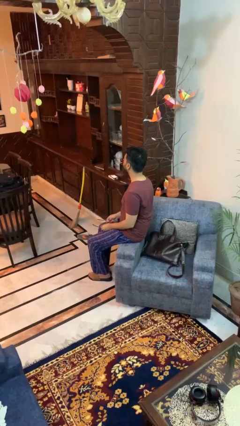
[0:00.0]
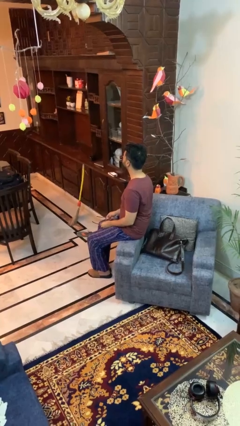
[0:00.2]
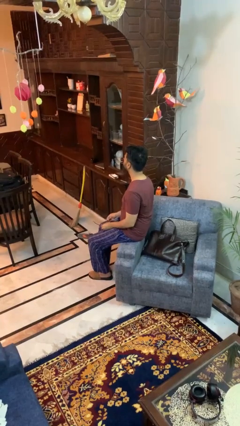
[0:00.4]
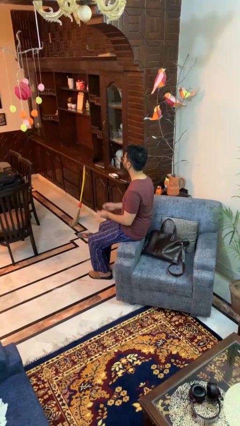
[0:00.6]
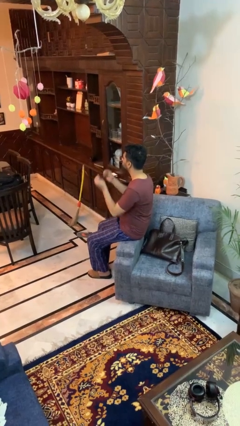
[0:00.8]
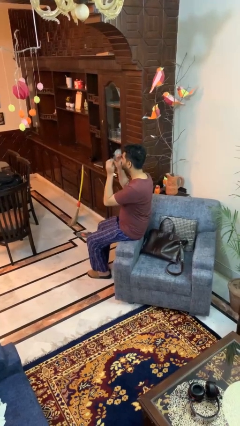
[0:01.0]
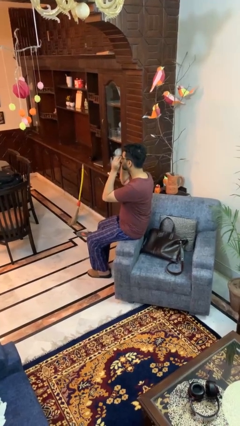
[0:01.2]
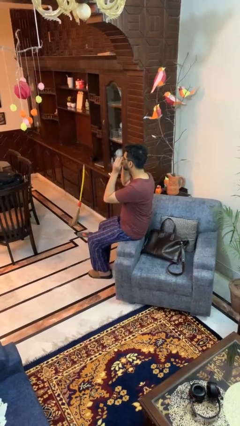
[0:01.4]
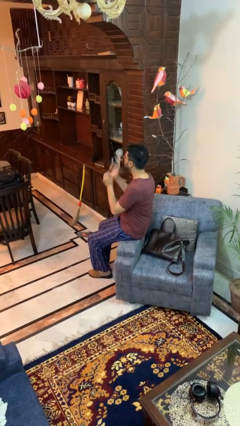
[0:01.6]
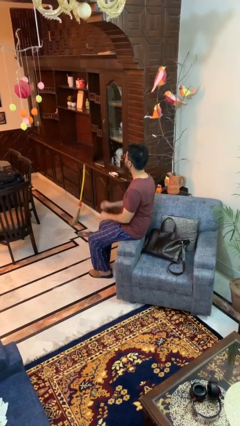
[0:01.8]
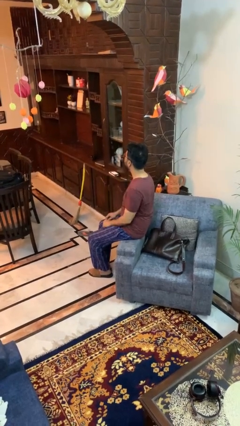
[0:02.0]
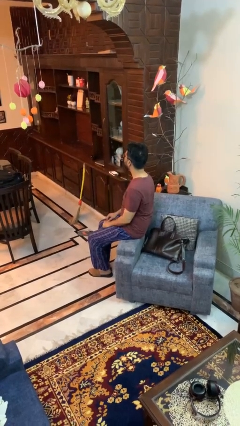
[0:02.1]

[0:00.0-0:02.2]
person puts on glasses

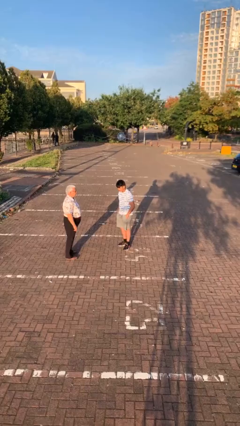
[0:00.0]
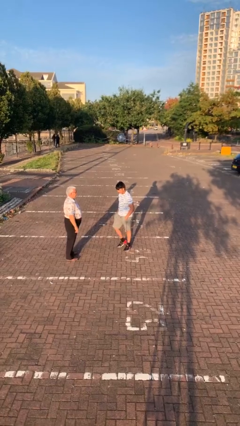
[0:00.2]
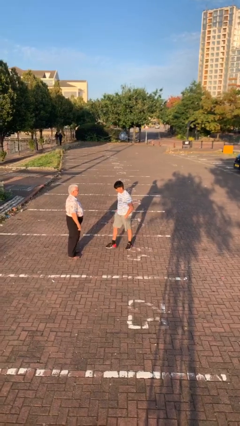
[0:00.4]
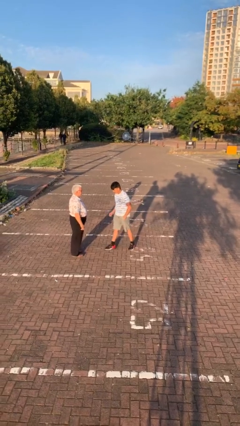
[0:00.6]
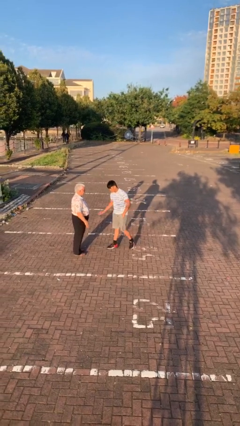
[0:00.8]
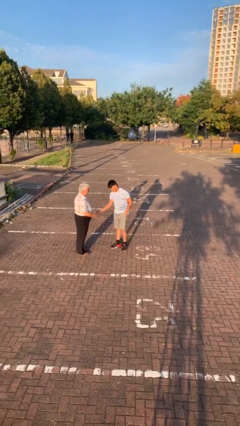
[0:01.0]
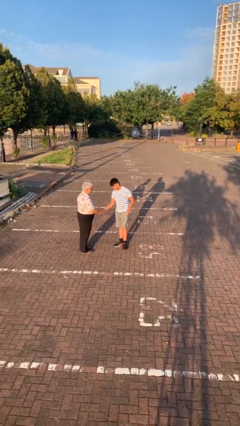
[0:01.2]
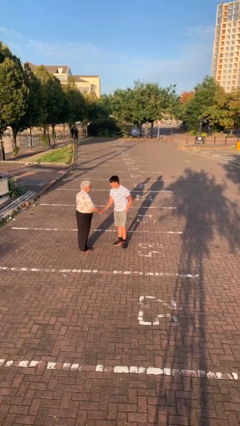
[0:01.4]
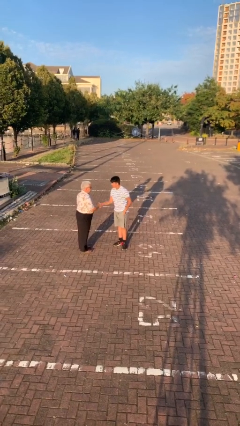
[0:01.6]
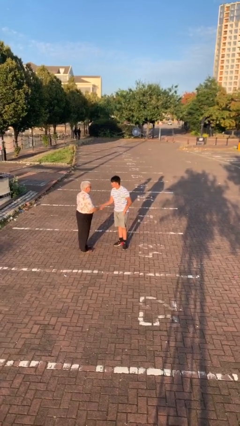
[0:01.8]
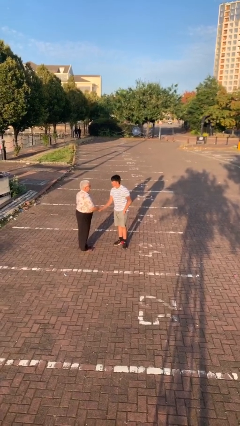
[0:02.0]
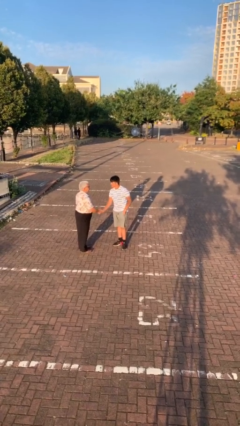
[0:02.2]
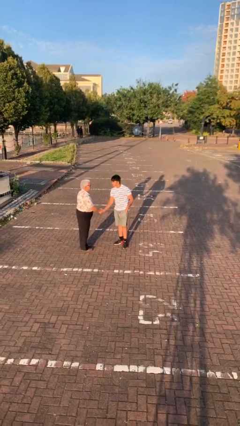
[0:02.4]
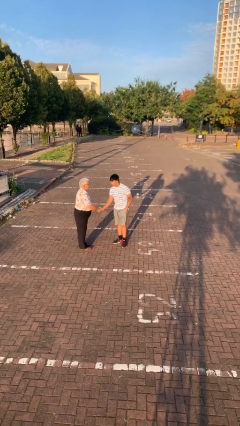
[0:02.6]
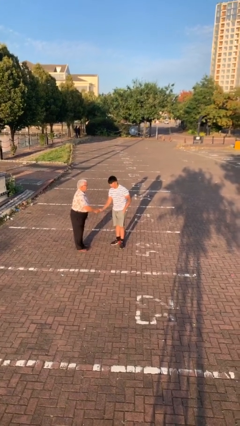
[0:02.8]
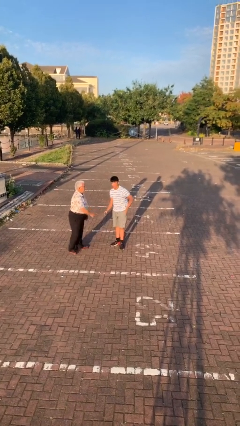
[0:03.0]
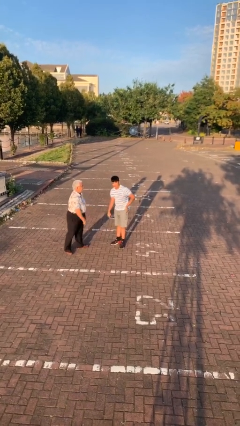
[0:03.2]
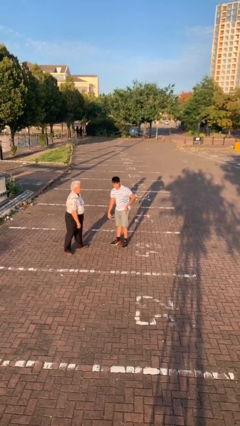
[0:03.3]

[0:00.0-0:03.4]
person shakes hand

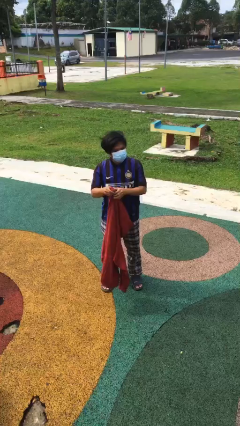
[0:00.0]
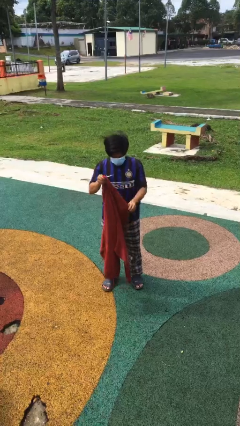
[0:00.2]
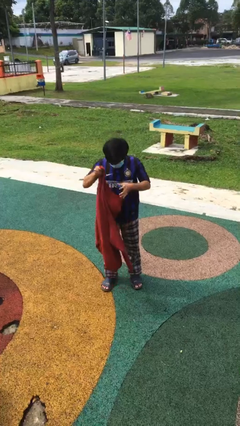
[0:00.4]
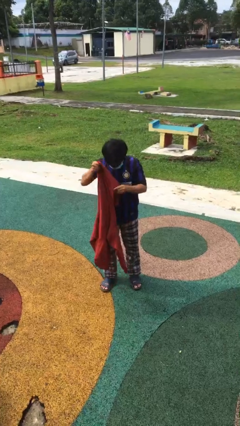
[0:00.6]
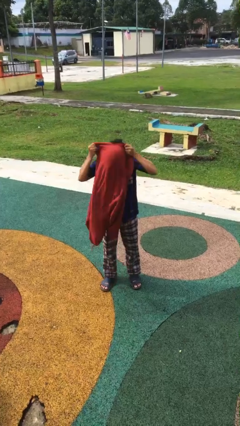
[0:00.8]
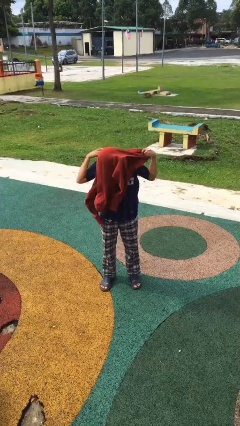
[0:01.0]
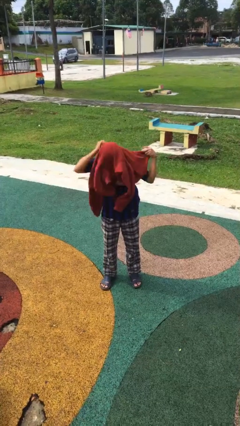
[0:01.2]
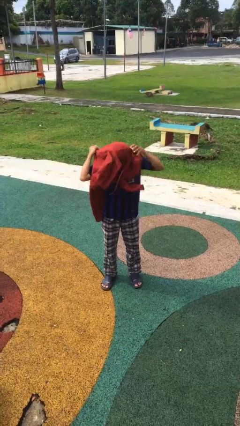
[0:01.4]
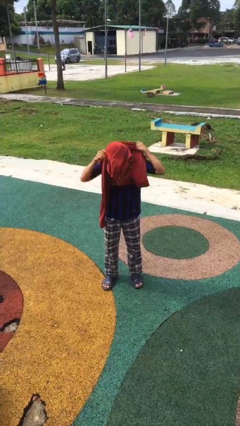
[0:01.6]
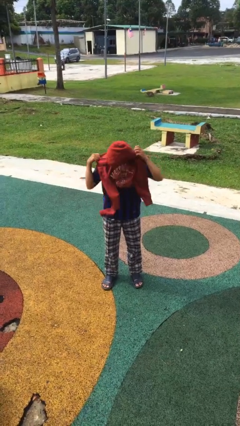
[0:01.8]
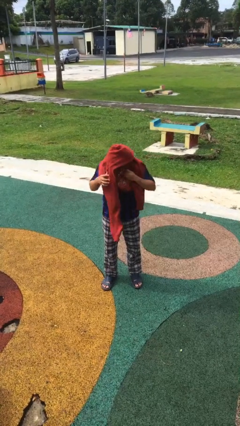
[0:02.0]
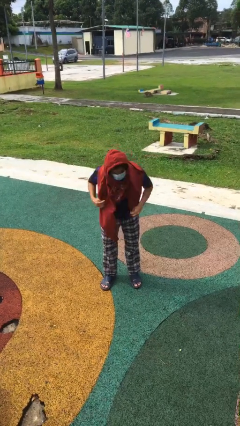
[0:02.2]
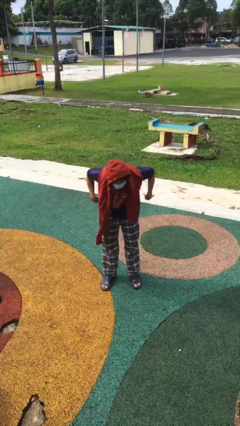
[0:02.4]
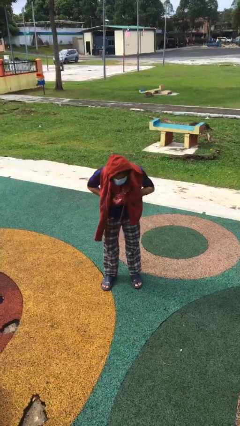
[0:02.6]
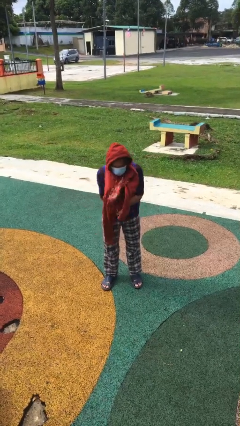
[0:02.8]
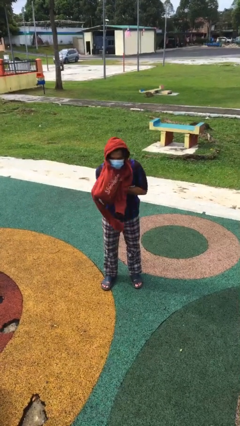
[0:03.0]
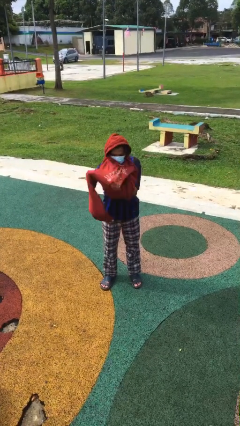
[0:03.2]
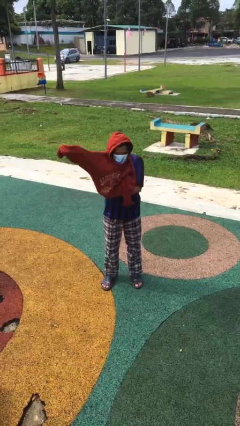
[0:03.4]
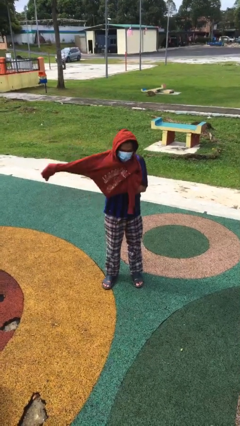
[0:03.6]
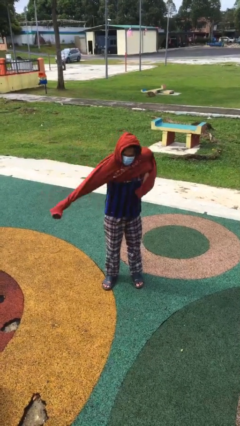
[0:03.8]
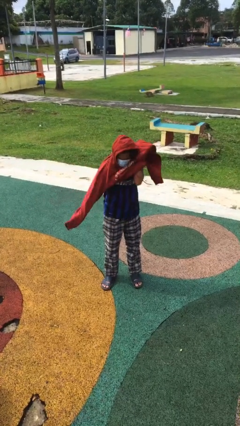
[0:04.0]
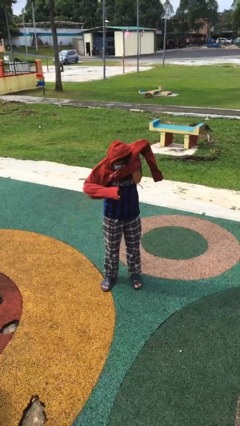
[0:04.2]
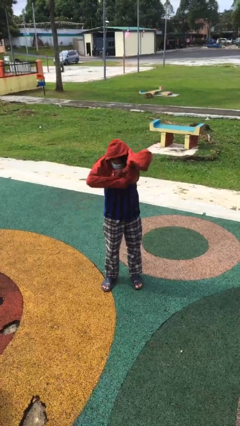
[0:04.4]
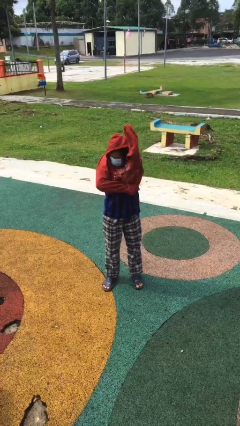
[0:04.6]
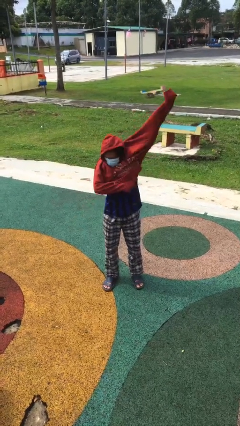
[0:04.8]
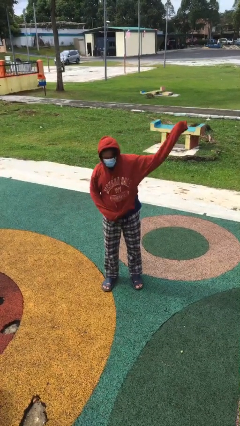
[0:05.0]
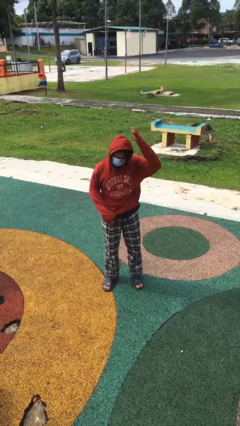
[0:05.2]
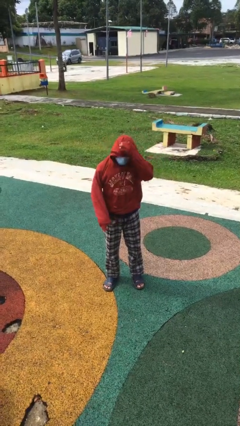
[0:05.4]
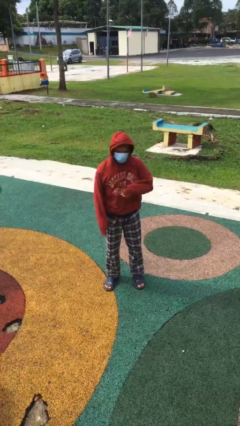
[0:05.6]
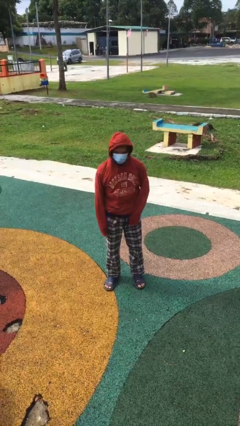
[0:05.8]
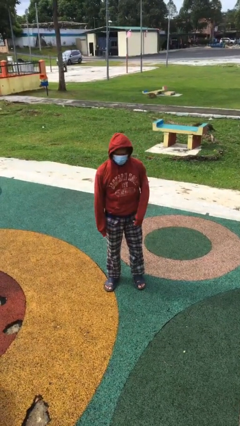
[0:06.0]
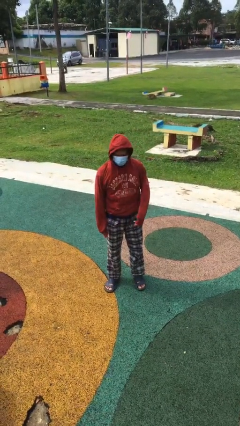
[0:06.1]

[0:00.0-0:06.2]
person puts on hoodie

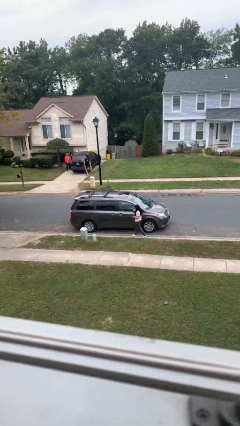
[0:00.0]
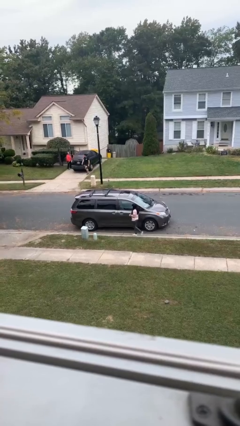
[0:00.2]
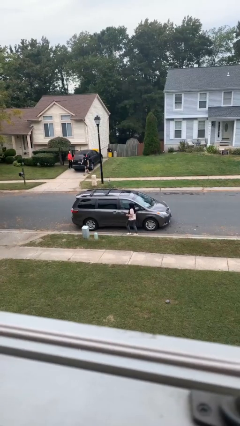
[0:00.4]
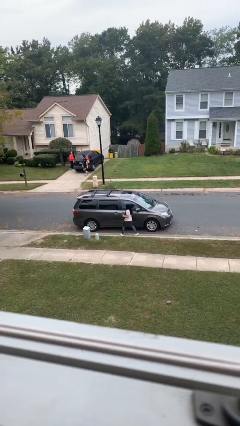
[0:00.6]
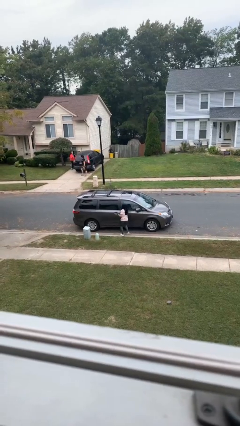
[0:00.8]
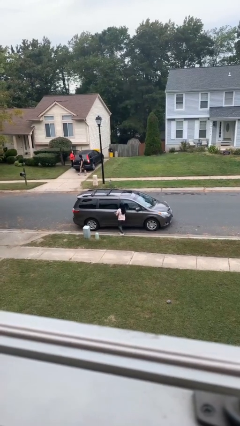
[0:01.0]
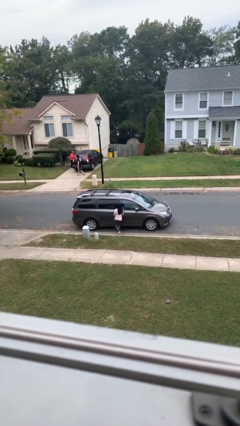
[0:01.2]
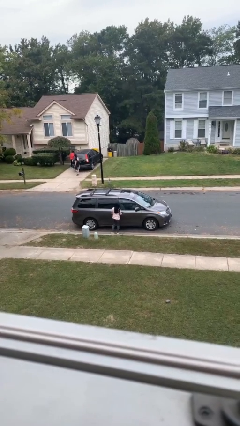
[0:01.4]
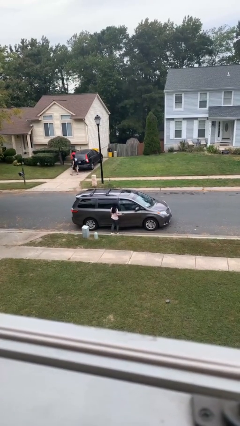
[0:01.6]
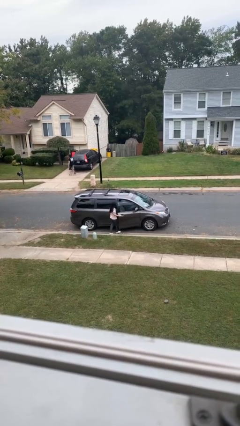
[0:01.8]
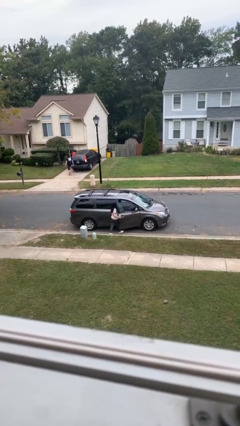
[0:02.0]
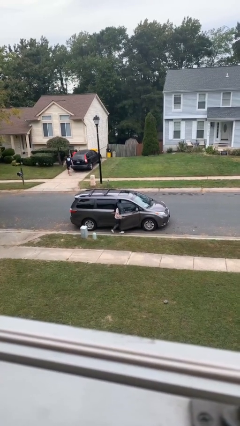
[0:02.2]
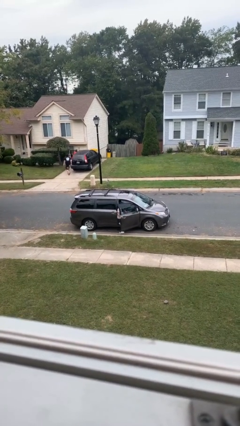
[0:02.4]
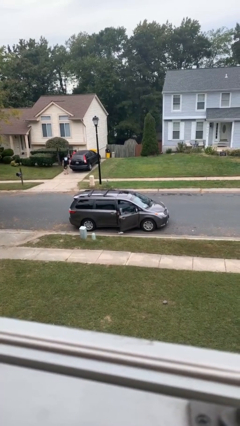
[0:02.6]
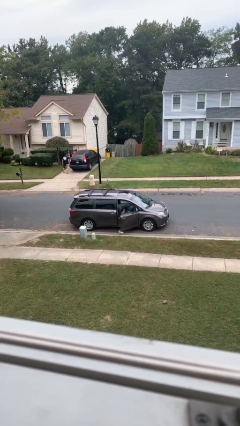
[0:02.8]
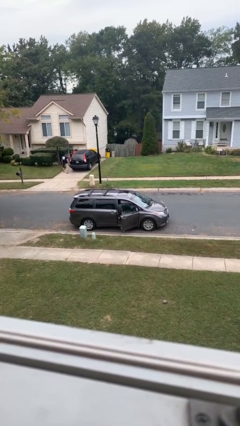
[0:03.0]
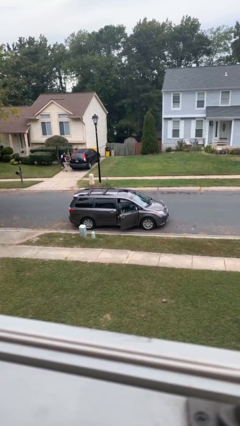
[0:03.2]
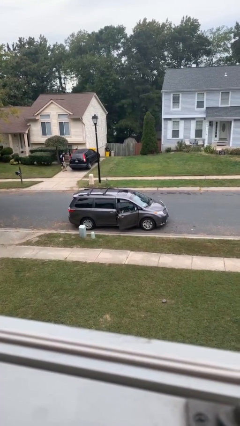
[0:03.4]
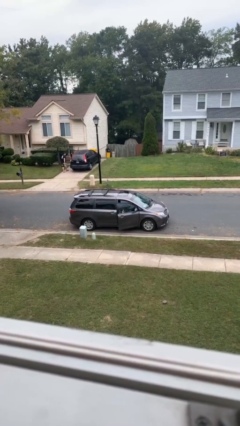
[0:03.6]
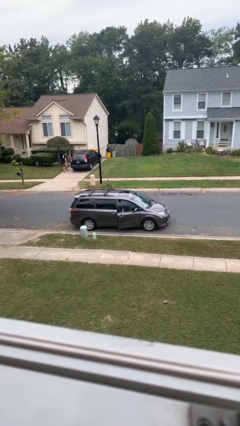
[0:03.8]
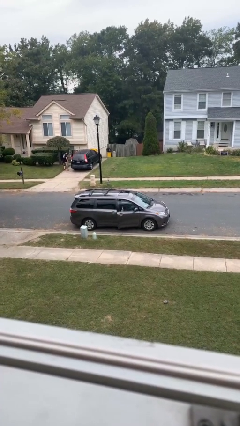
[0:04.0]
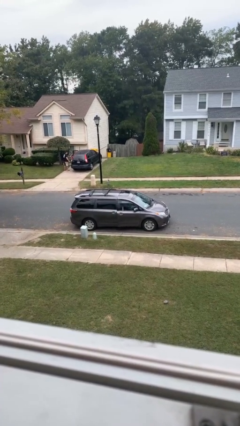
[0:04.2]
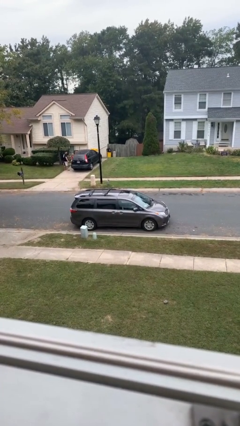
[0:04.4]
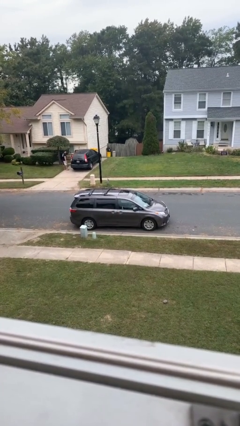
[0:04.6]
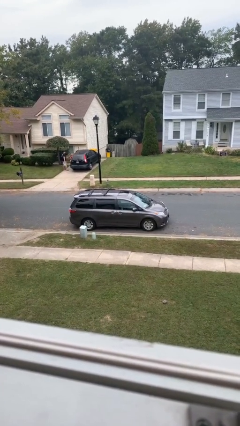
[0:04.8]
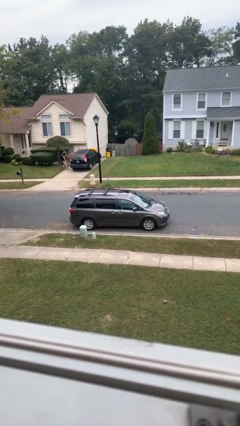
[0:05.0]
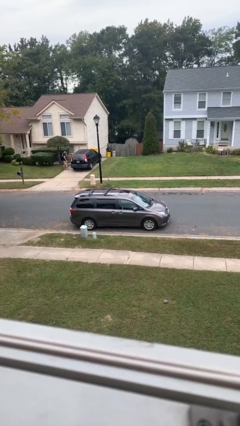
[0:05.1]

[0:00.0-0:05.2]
car picks up person

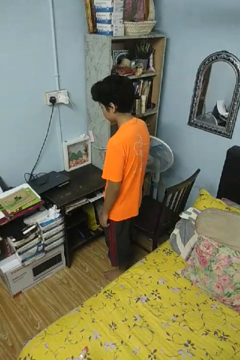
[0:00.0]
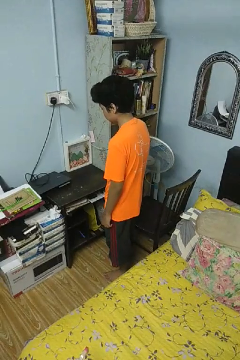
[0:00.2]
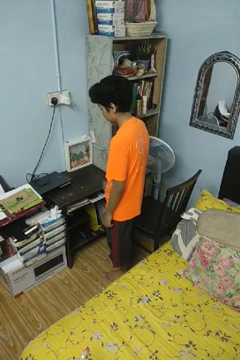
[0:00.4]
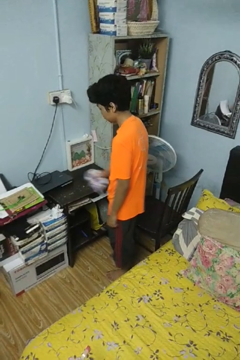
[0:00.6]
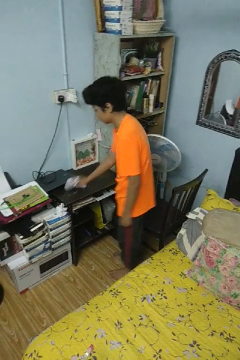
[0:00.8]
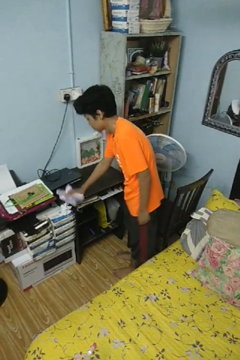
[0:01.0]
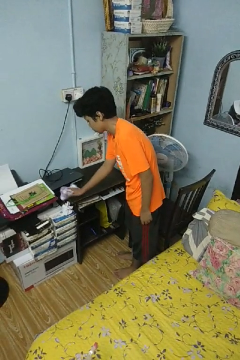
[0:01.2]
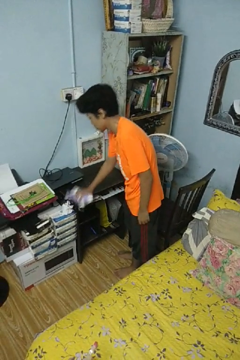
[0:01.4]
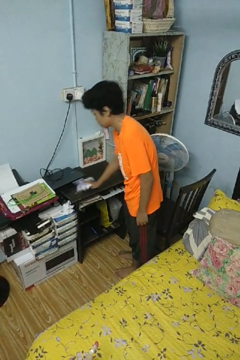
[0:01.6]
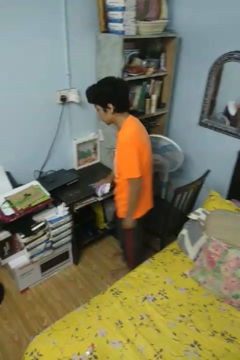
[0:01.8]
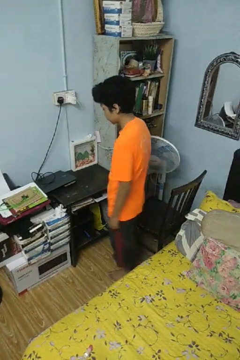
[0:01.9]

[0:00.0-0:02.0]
person cleans table with rag
